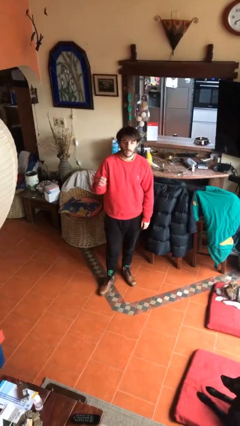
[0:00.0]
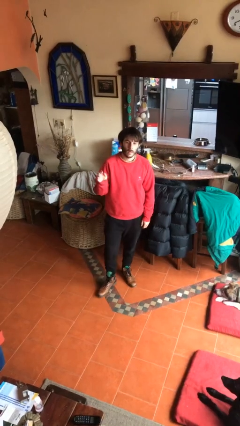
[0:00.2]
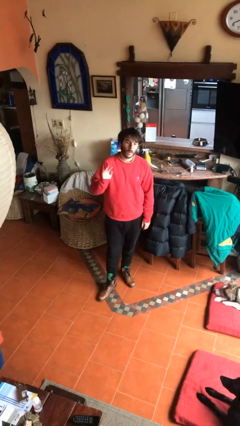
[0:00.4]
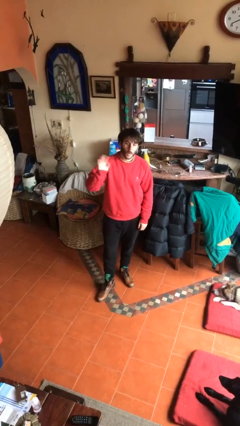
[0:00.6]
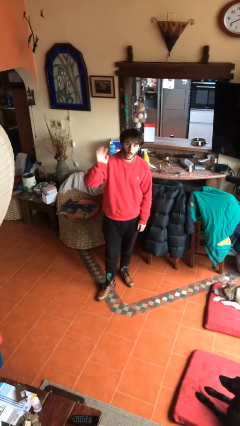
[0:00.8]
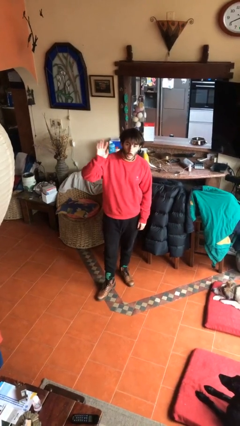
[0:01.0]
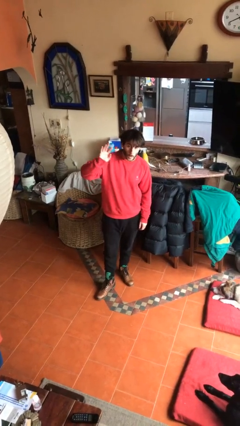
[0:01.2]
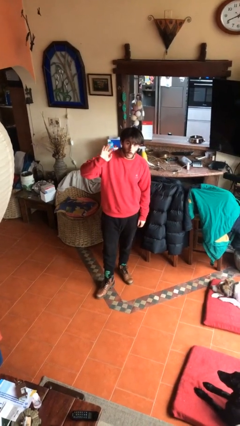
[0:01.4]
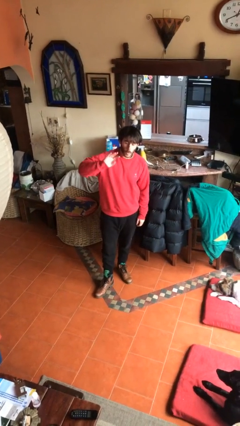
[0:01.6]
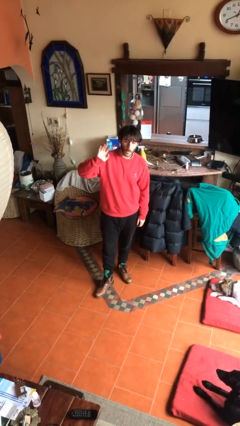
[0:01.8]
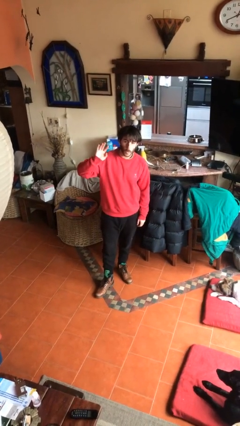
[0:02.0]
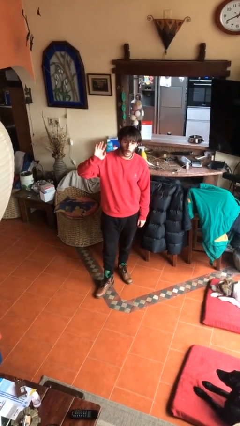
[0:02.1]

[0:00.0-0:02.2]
person waves at person

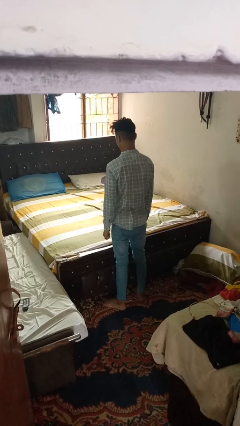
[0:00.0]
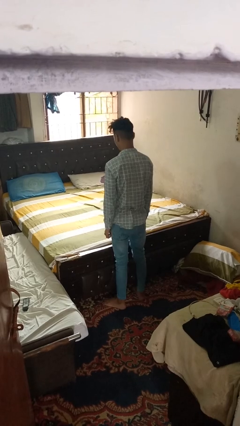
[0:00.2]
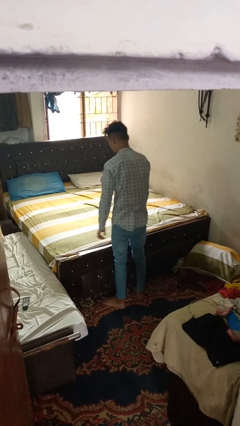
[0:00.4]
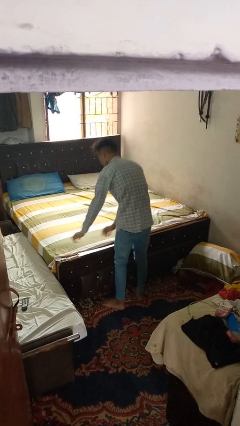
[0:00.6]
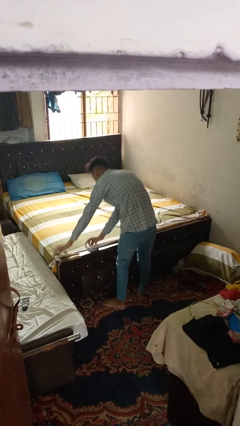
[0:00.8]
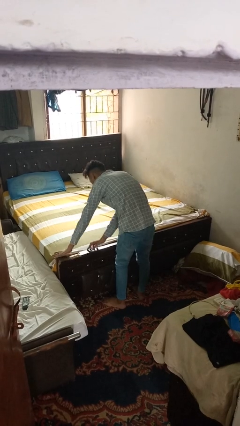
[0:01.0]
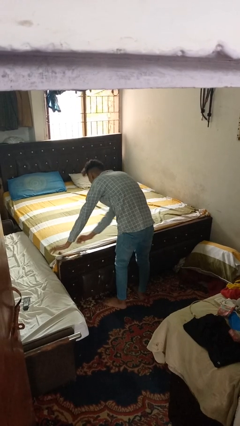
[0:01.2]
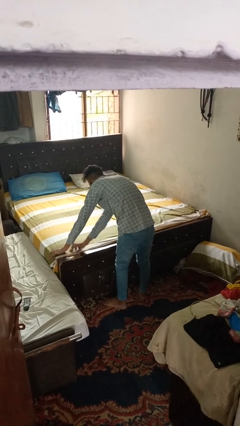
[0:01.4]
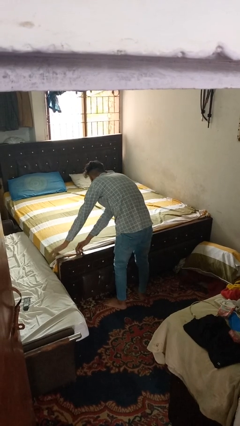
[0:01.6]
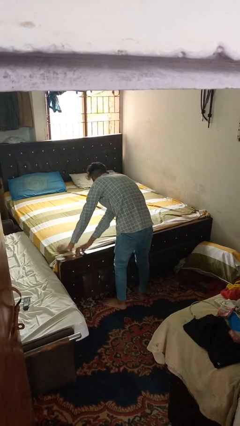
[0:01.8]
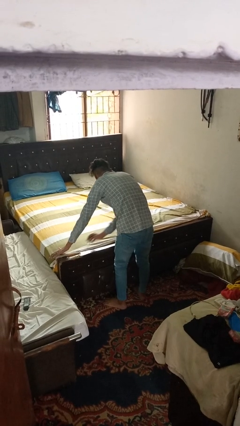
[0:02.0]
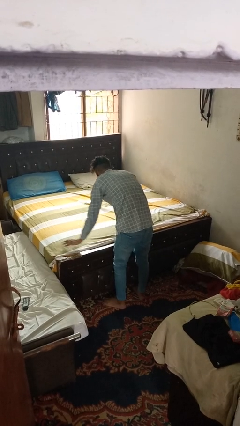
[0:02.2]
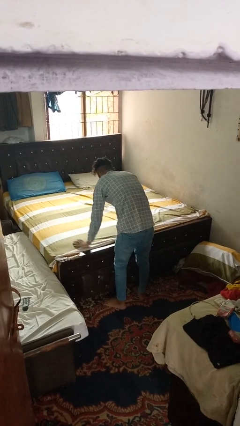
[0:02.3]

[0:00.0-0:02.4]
person makes bed

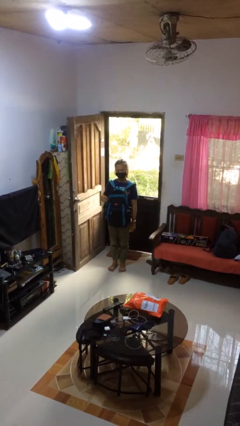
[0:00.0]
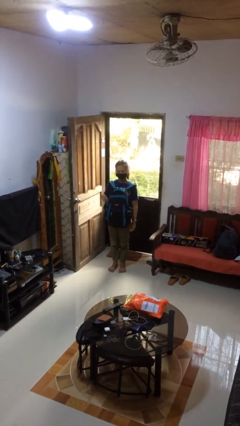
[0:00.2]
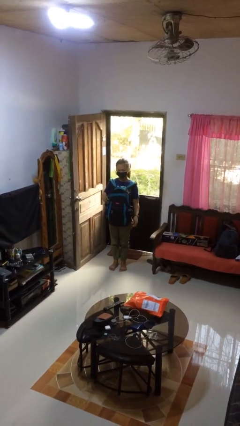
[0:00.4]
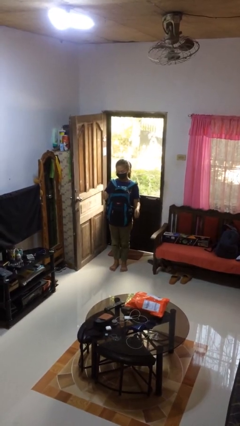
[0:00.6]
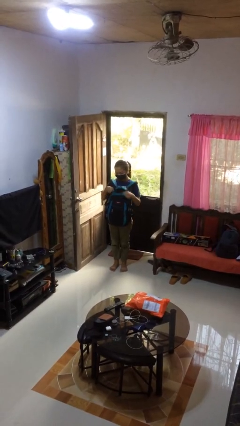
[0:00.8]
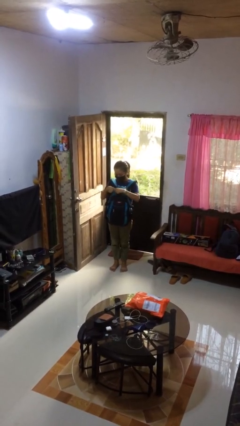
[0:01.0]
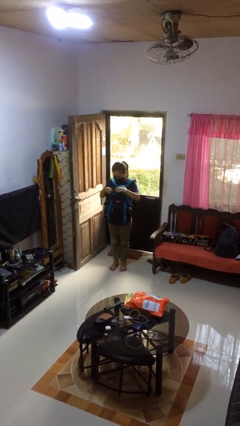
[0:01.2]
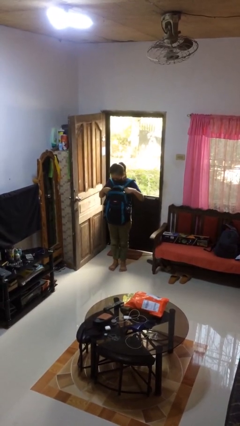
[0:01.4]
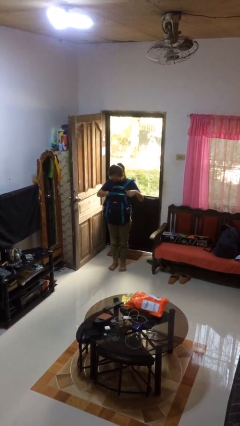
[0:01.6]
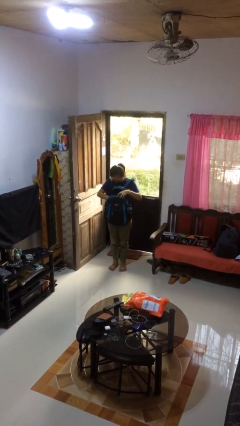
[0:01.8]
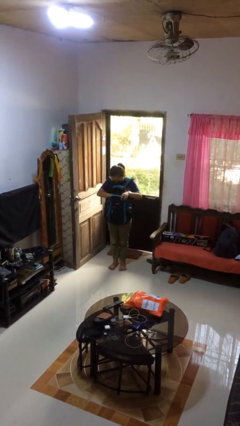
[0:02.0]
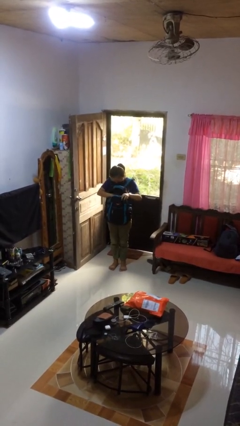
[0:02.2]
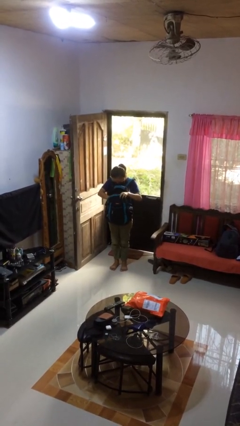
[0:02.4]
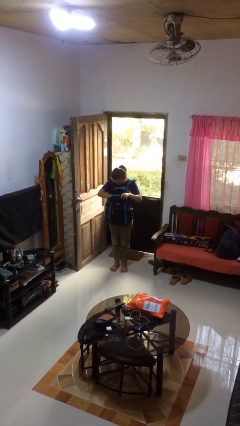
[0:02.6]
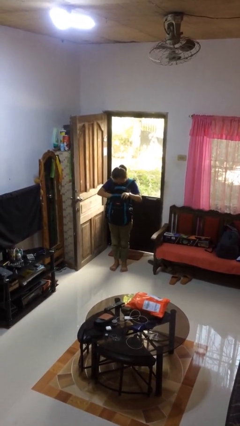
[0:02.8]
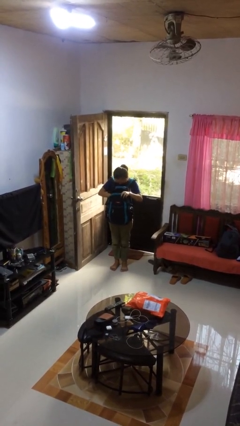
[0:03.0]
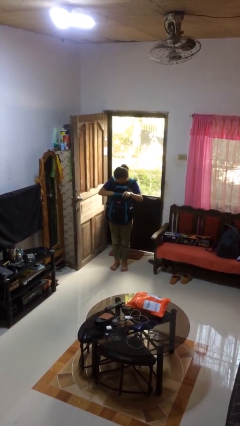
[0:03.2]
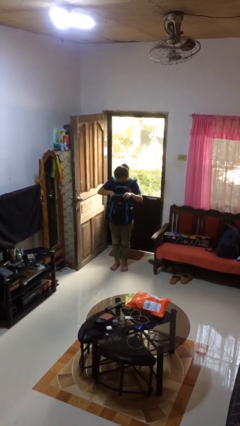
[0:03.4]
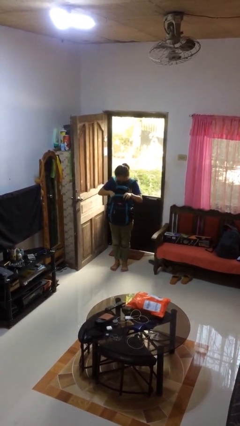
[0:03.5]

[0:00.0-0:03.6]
person searches in backpack

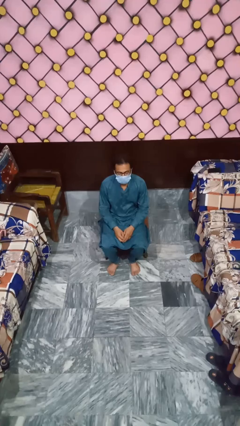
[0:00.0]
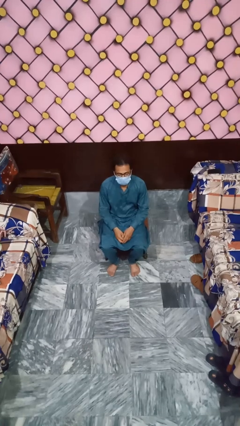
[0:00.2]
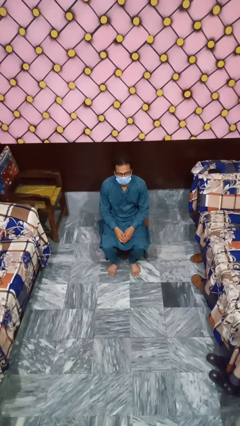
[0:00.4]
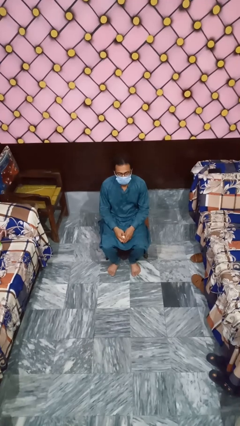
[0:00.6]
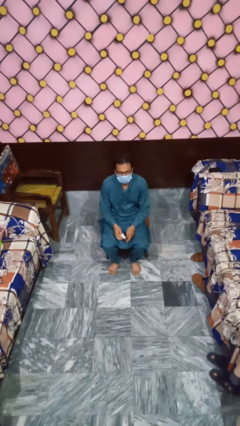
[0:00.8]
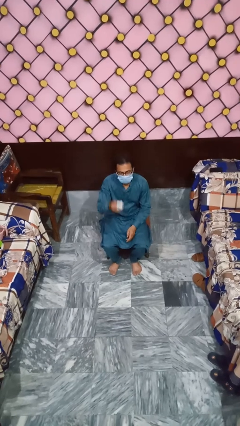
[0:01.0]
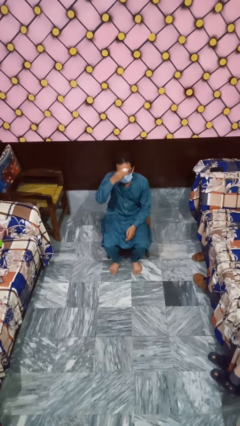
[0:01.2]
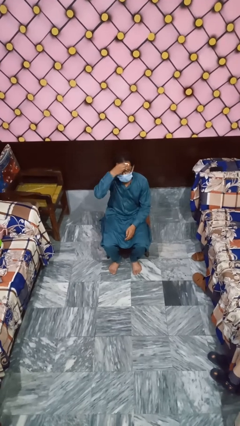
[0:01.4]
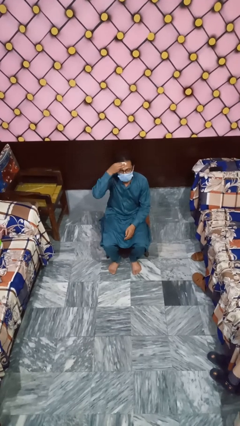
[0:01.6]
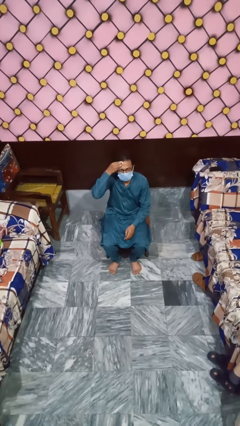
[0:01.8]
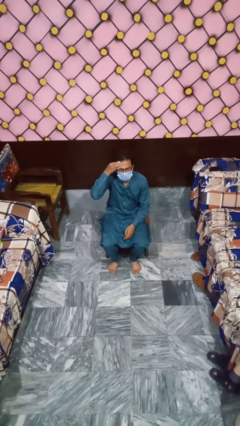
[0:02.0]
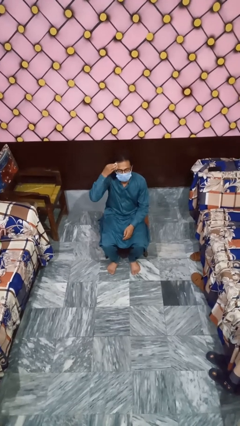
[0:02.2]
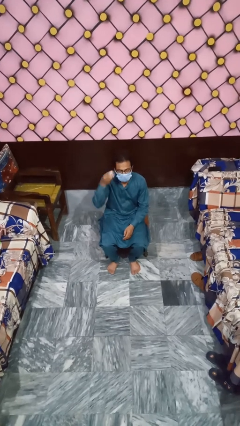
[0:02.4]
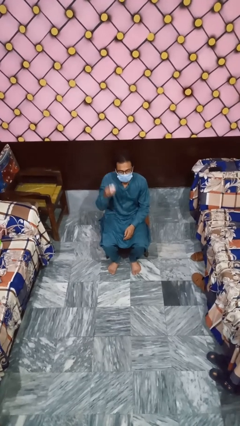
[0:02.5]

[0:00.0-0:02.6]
person wipes mouth with napkin

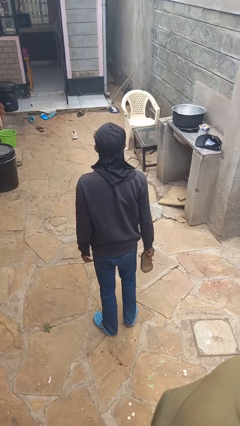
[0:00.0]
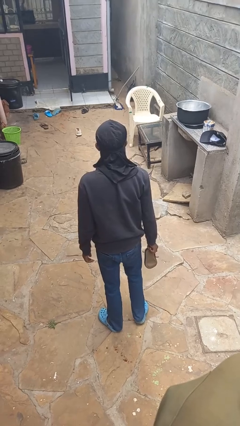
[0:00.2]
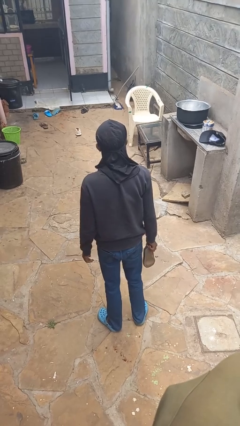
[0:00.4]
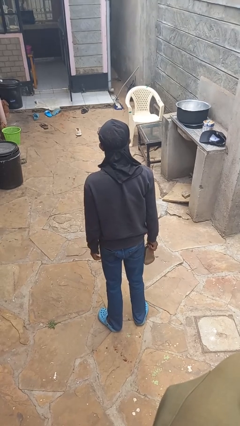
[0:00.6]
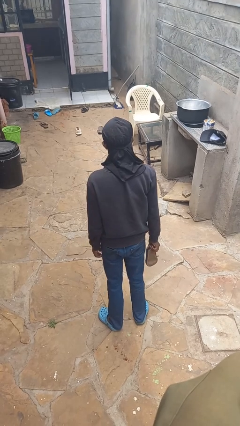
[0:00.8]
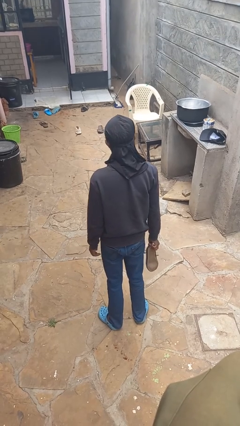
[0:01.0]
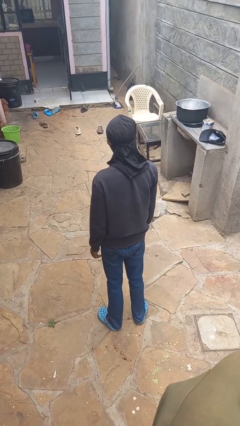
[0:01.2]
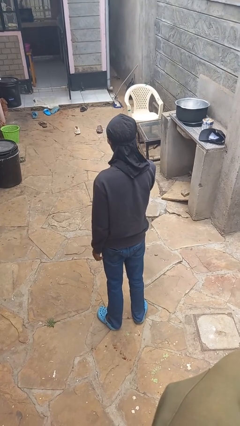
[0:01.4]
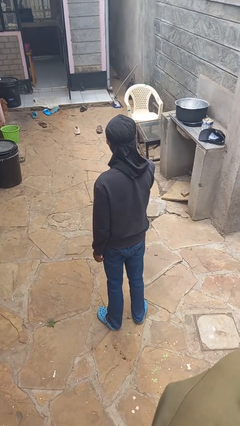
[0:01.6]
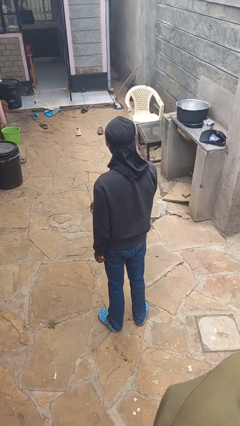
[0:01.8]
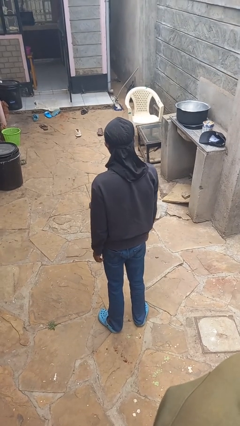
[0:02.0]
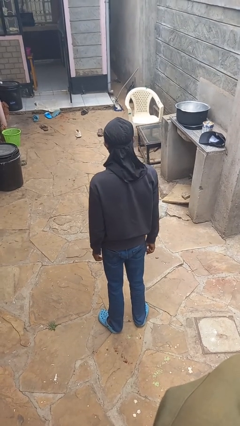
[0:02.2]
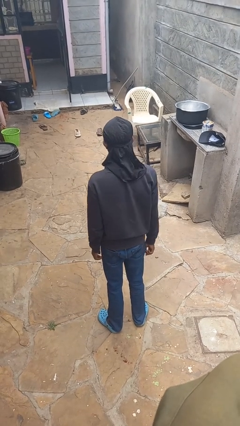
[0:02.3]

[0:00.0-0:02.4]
person throws object to ground

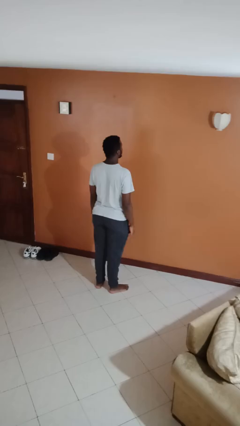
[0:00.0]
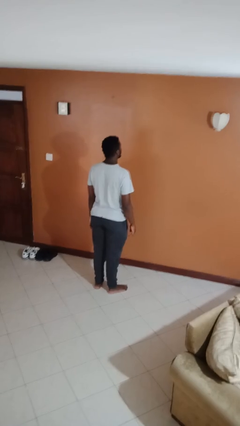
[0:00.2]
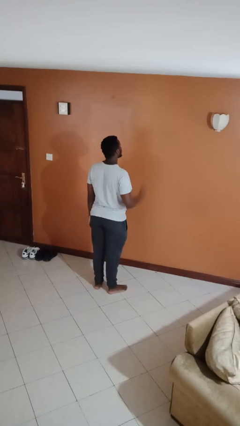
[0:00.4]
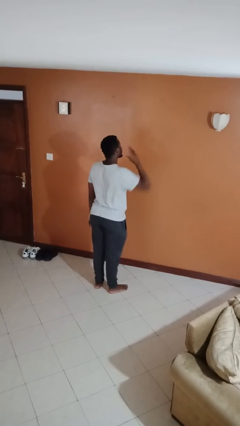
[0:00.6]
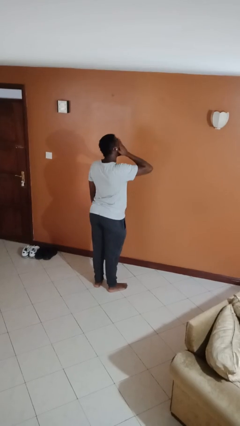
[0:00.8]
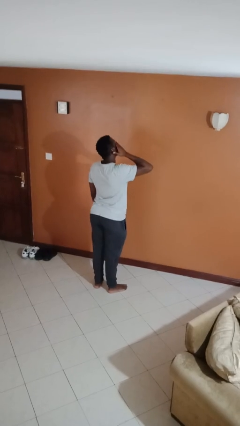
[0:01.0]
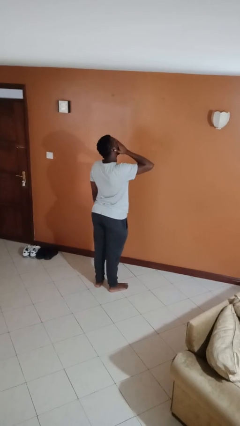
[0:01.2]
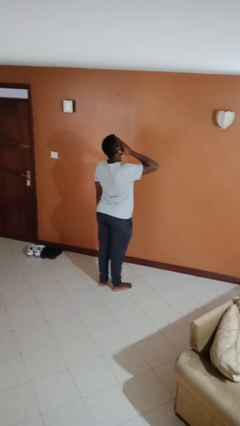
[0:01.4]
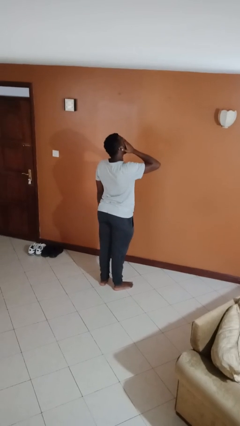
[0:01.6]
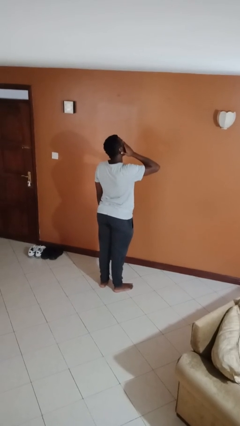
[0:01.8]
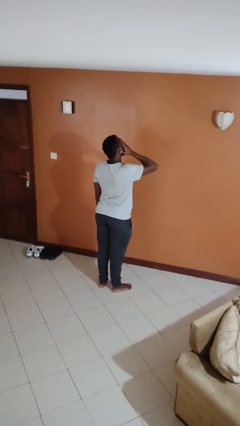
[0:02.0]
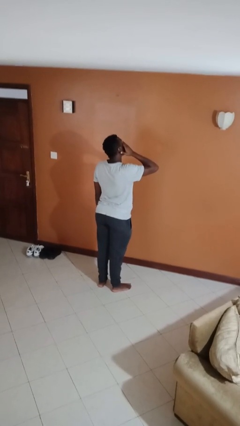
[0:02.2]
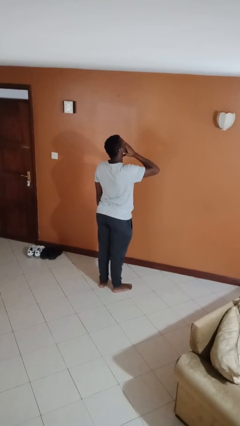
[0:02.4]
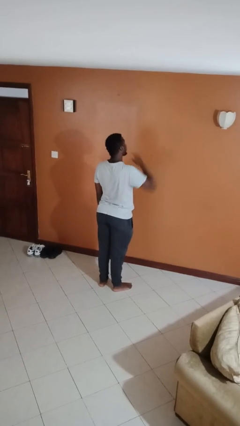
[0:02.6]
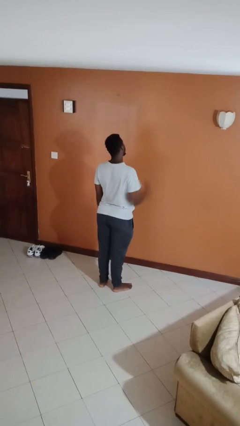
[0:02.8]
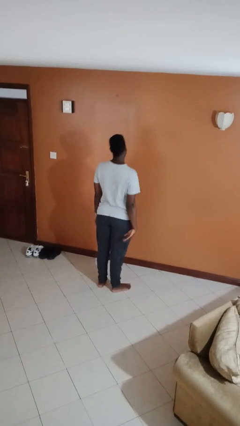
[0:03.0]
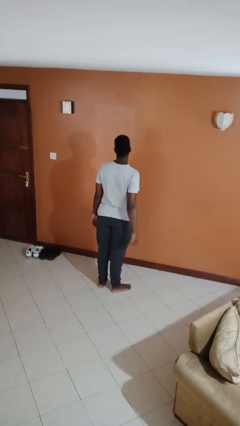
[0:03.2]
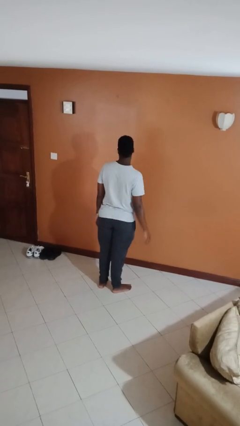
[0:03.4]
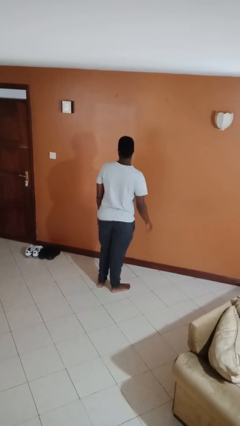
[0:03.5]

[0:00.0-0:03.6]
person rubs eyes

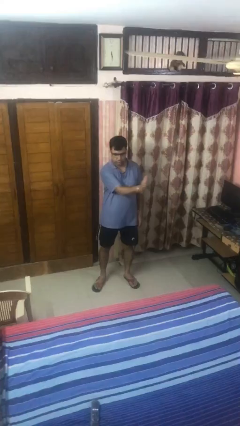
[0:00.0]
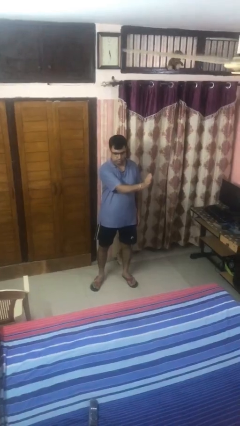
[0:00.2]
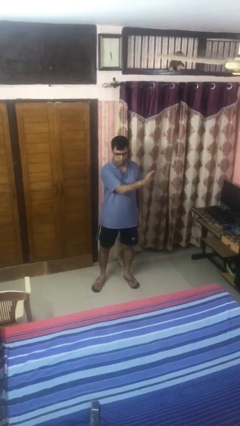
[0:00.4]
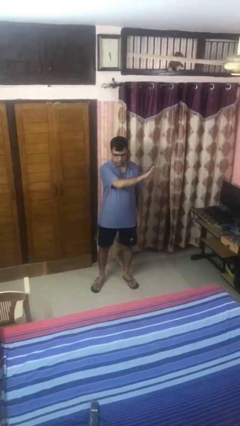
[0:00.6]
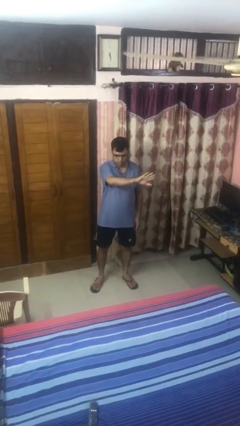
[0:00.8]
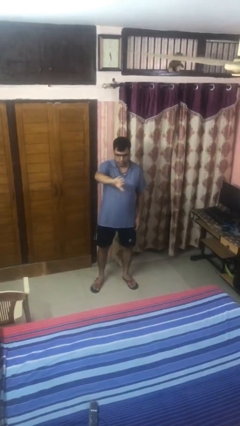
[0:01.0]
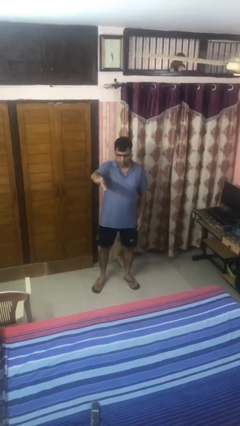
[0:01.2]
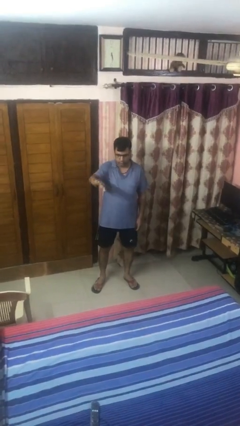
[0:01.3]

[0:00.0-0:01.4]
person gestures swipe right
